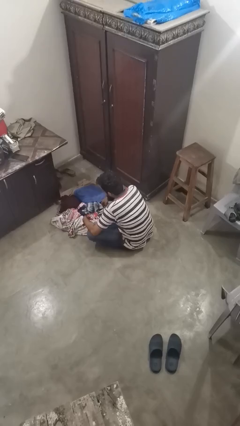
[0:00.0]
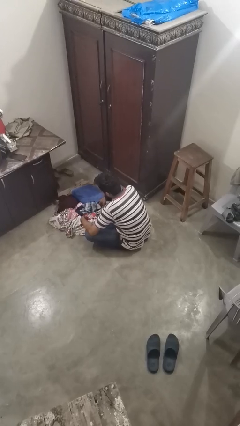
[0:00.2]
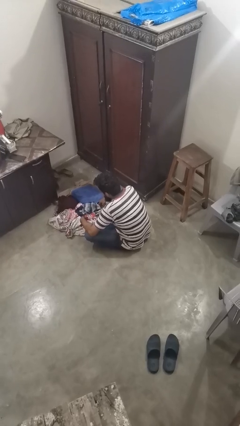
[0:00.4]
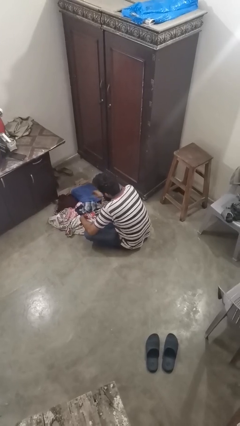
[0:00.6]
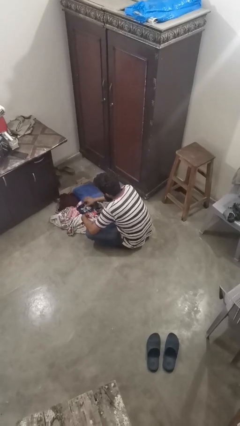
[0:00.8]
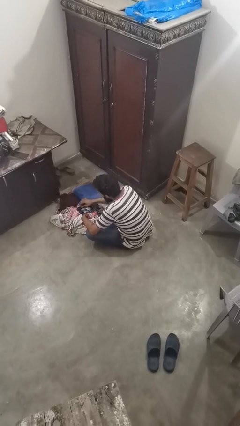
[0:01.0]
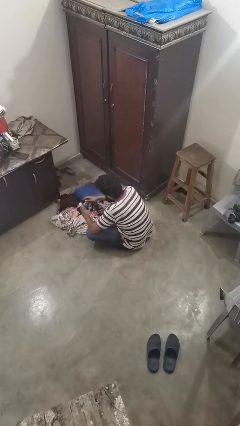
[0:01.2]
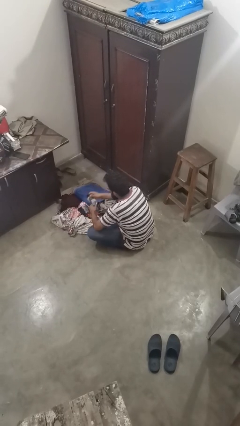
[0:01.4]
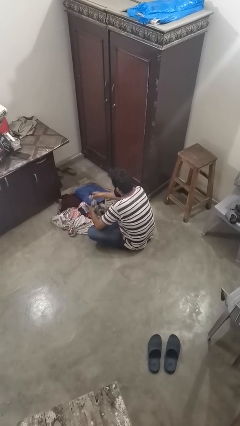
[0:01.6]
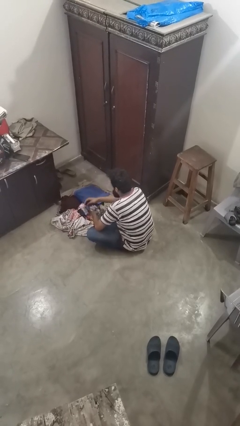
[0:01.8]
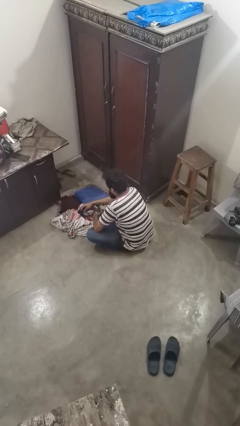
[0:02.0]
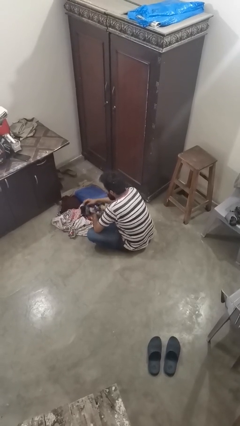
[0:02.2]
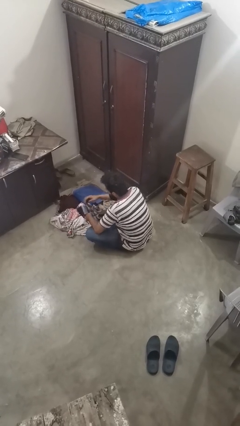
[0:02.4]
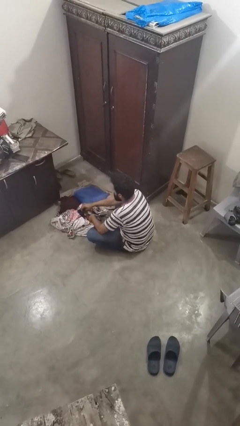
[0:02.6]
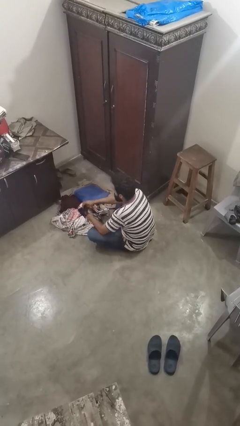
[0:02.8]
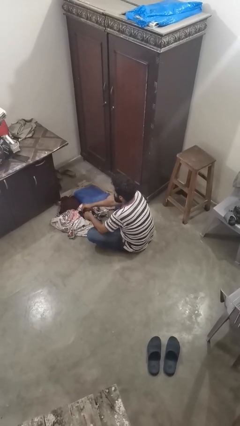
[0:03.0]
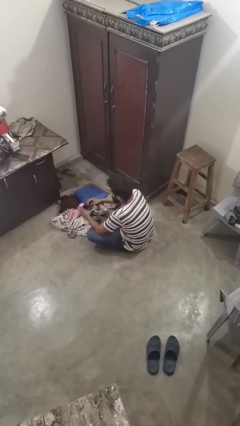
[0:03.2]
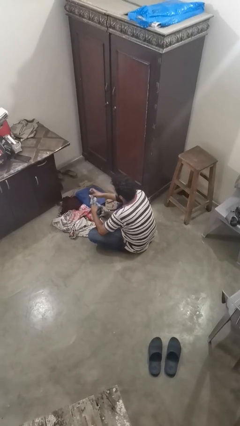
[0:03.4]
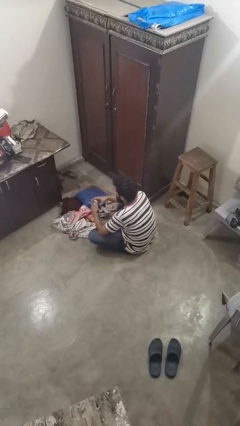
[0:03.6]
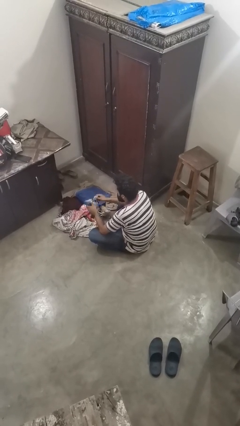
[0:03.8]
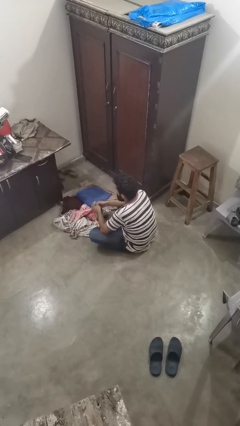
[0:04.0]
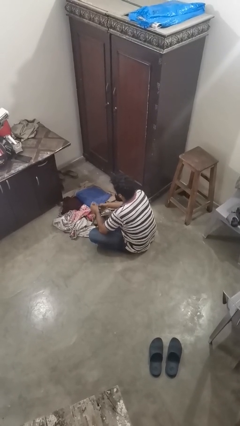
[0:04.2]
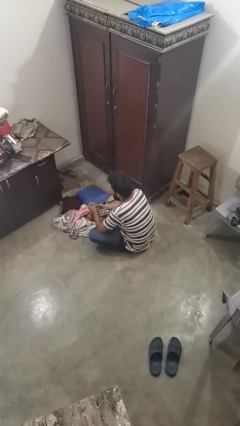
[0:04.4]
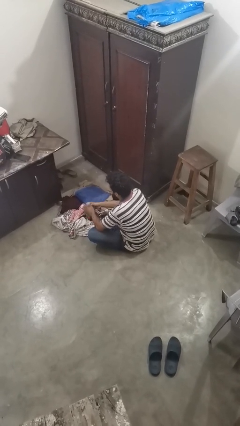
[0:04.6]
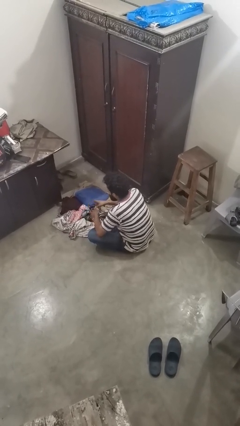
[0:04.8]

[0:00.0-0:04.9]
person folds socks

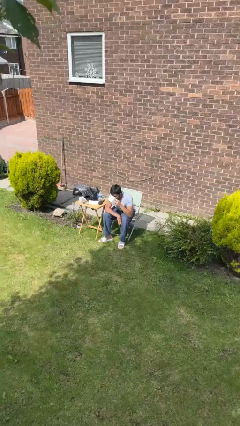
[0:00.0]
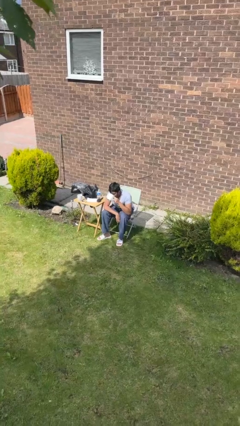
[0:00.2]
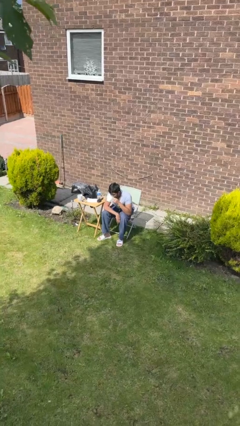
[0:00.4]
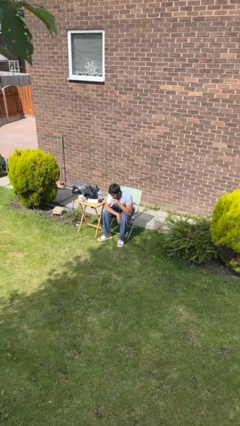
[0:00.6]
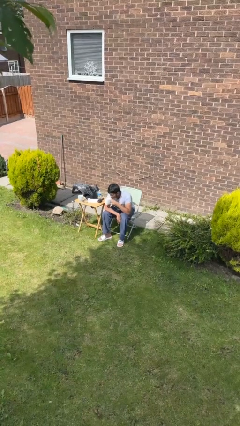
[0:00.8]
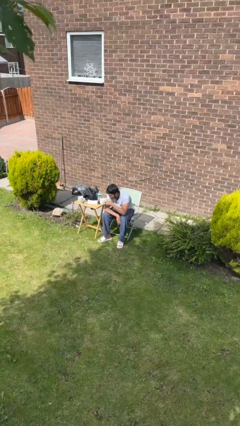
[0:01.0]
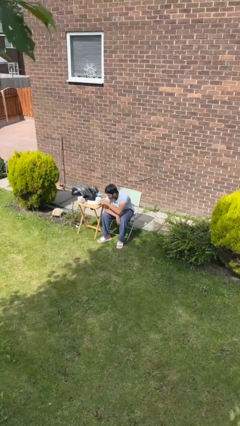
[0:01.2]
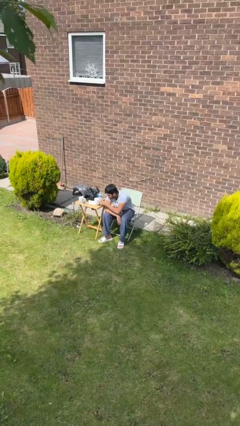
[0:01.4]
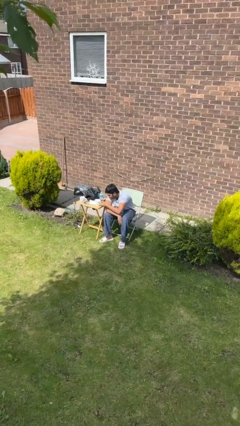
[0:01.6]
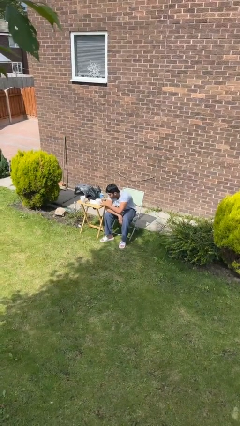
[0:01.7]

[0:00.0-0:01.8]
person puts down object on table

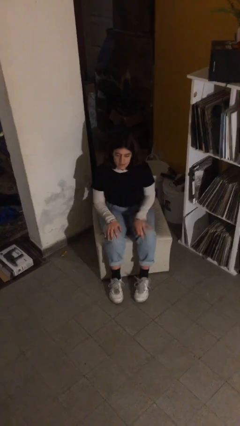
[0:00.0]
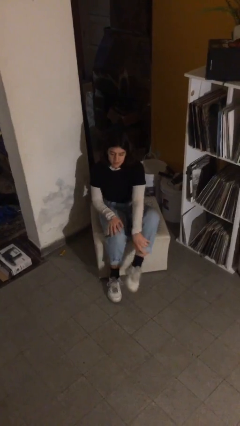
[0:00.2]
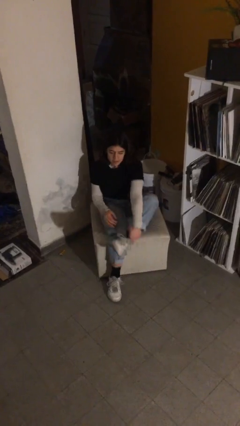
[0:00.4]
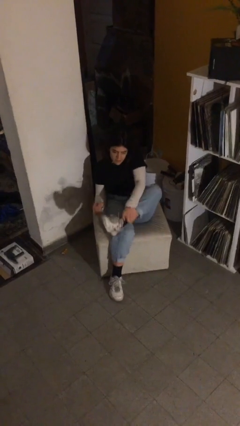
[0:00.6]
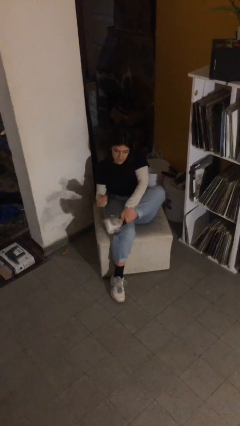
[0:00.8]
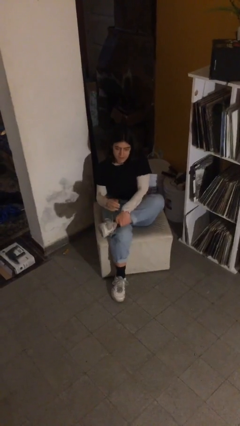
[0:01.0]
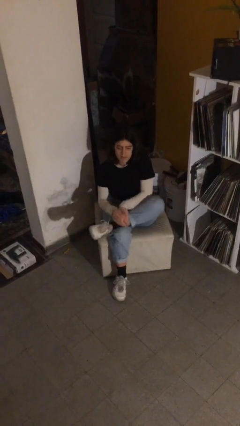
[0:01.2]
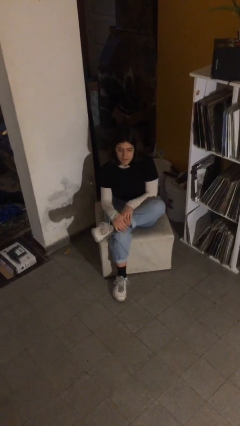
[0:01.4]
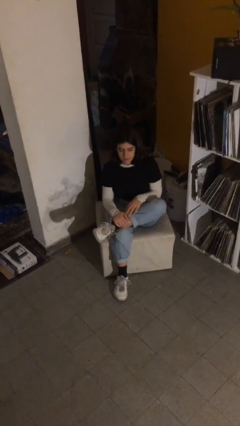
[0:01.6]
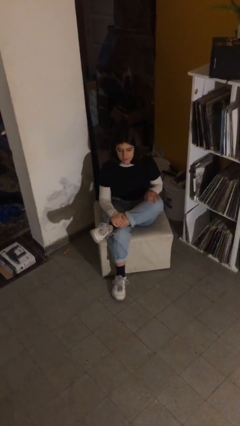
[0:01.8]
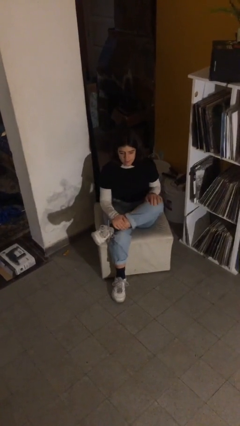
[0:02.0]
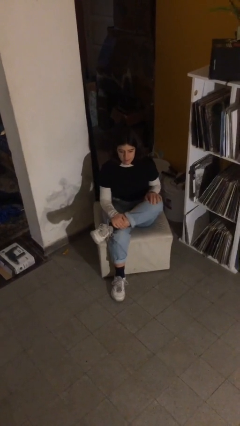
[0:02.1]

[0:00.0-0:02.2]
person crosses legs

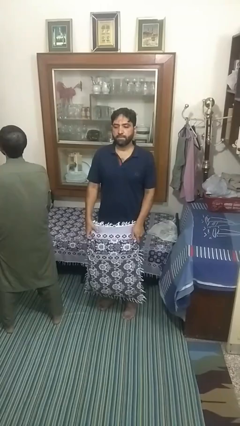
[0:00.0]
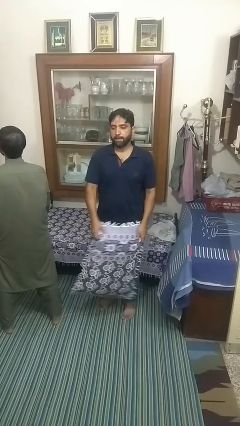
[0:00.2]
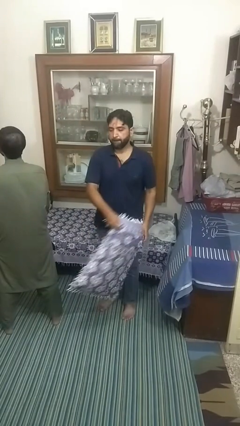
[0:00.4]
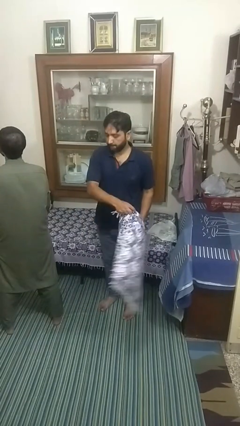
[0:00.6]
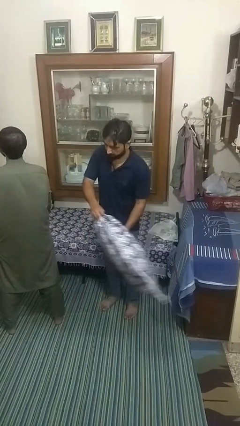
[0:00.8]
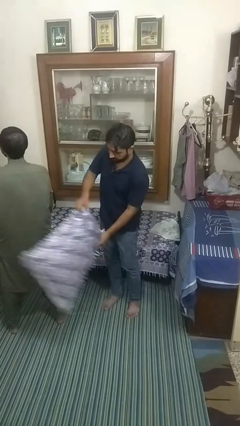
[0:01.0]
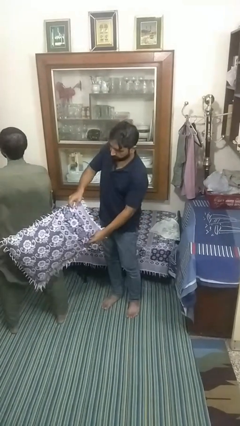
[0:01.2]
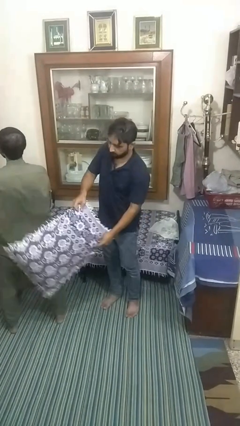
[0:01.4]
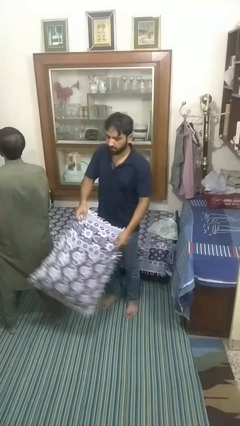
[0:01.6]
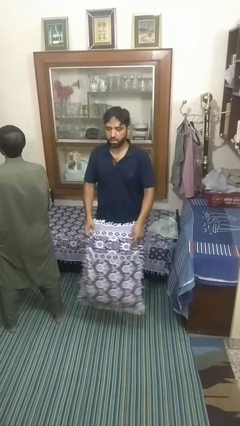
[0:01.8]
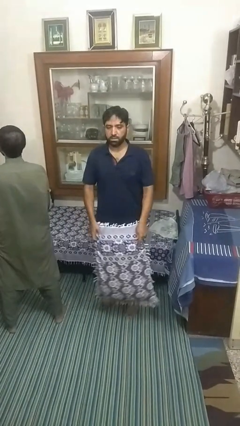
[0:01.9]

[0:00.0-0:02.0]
person hits person with pillow

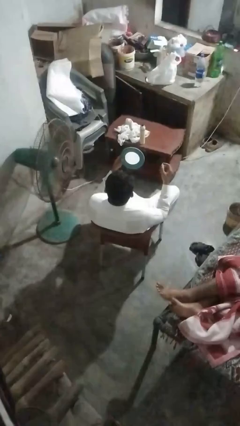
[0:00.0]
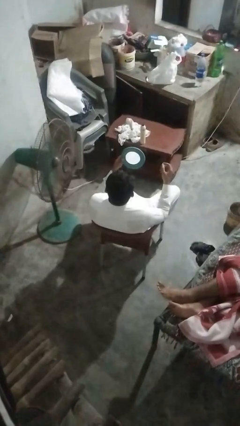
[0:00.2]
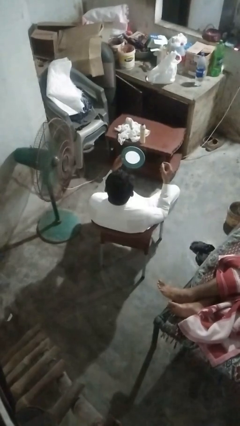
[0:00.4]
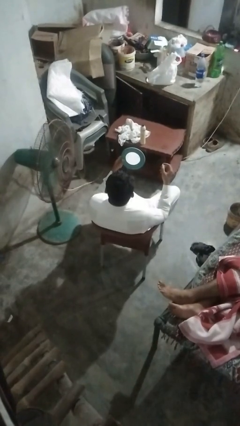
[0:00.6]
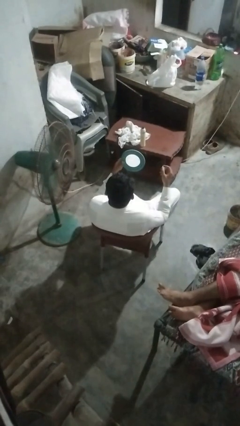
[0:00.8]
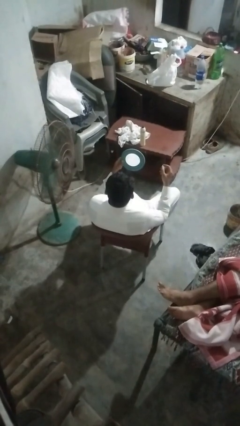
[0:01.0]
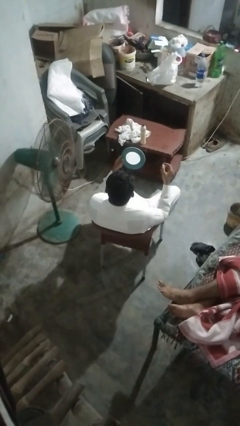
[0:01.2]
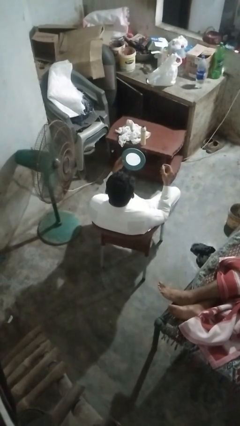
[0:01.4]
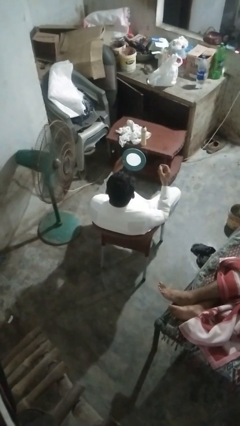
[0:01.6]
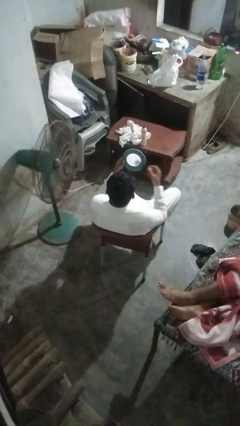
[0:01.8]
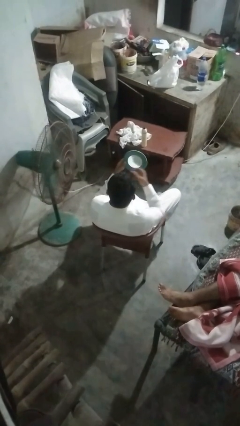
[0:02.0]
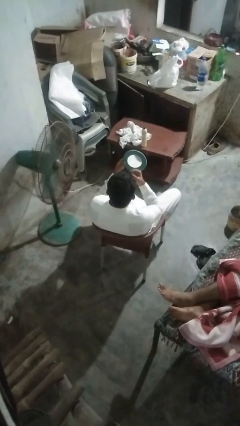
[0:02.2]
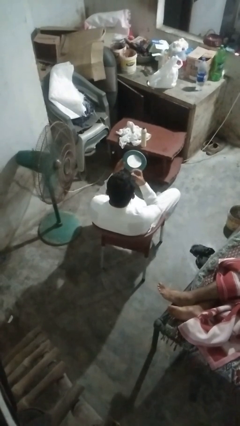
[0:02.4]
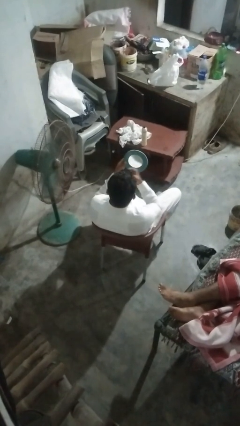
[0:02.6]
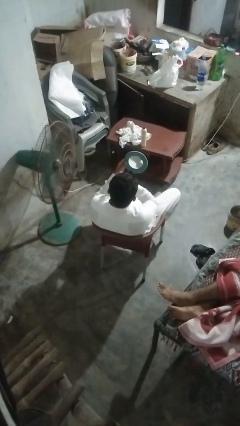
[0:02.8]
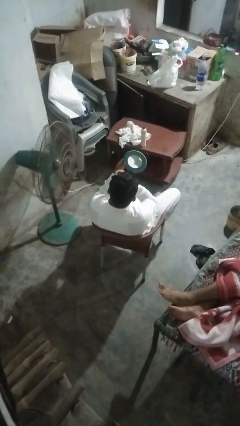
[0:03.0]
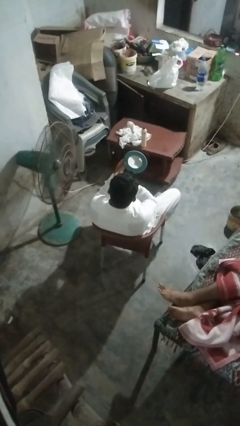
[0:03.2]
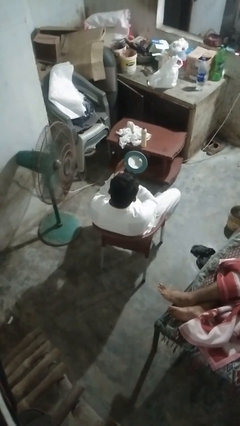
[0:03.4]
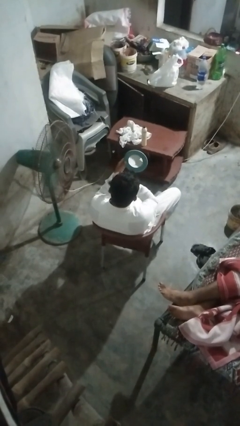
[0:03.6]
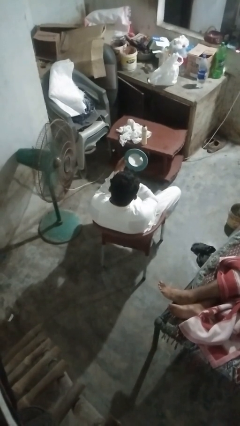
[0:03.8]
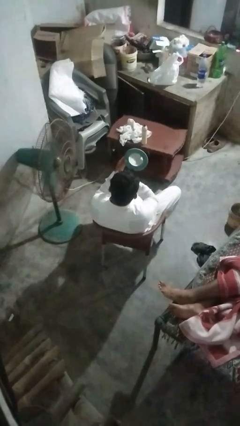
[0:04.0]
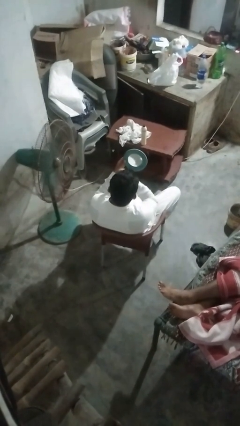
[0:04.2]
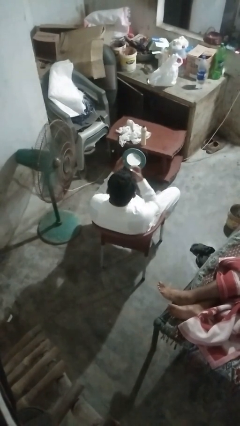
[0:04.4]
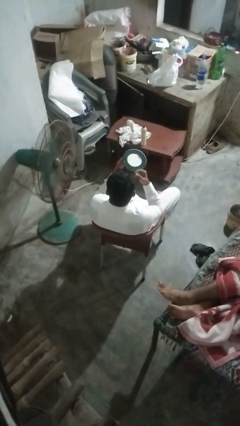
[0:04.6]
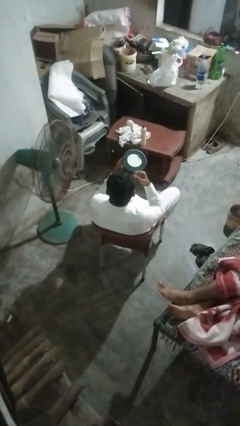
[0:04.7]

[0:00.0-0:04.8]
person applies eye makeup

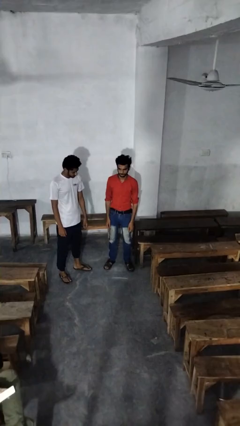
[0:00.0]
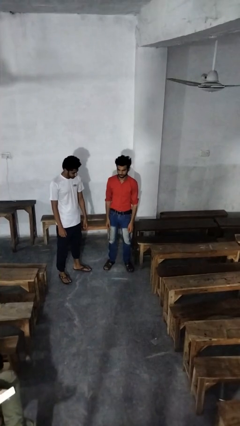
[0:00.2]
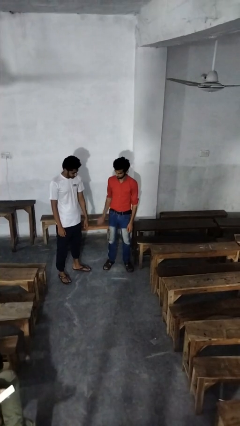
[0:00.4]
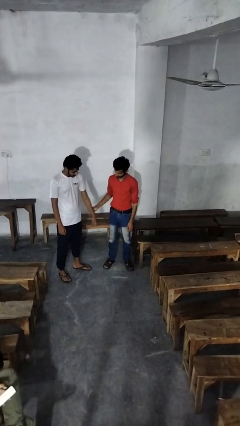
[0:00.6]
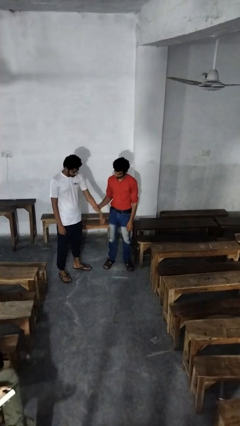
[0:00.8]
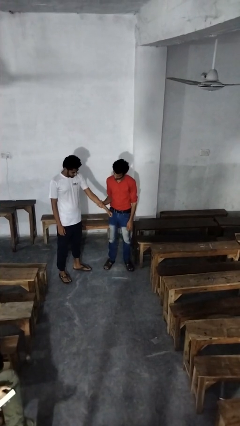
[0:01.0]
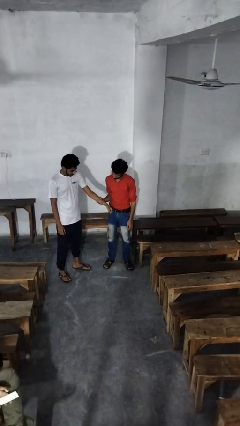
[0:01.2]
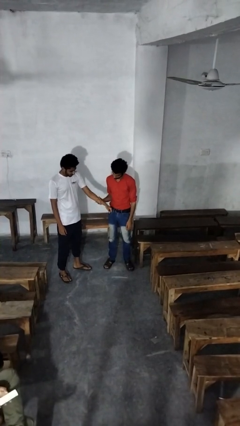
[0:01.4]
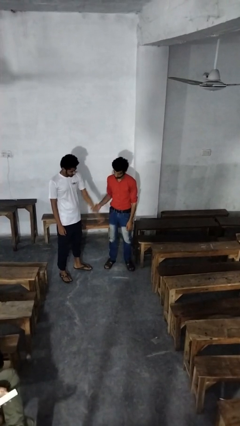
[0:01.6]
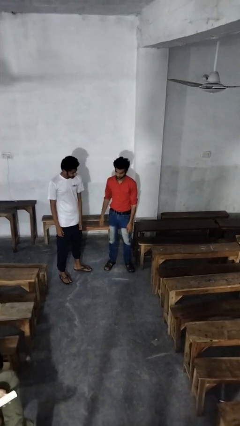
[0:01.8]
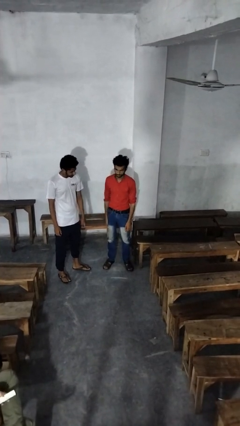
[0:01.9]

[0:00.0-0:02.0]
person grabs person by forearm

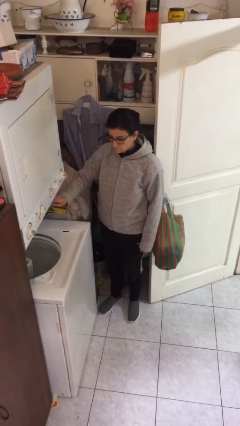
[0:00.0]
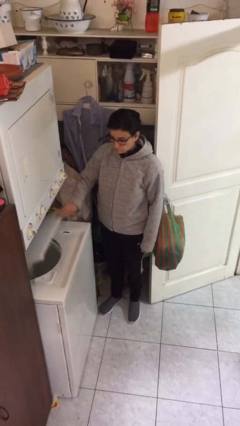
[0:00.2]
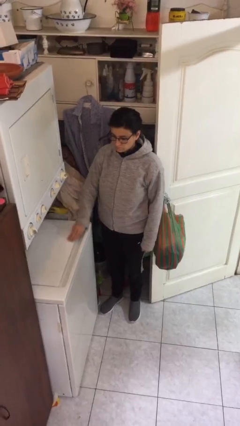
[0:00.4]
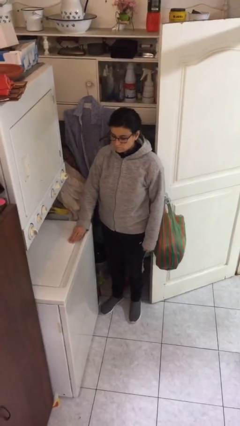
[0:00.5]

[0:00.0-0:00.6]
person closes clothes washer
